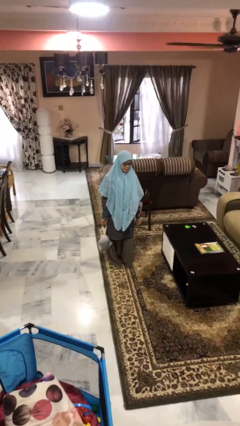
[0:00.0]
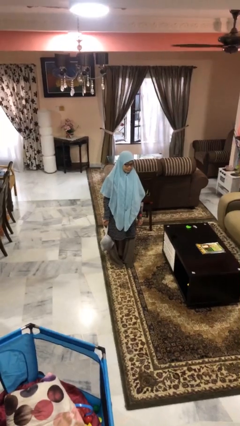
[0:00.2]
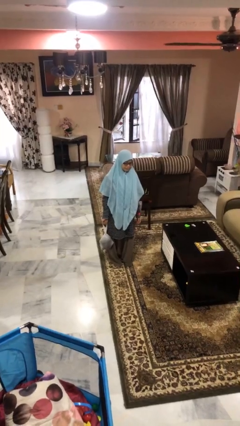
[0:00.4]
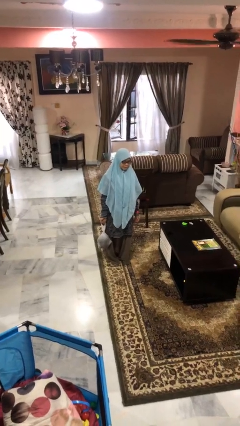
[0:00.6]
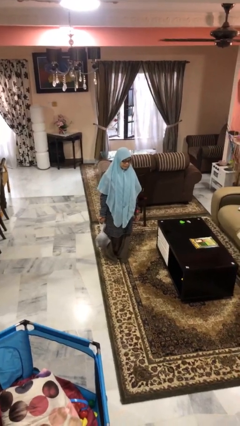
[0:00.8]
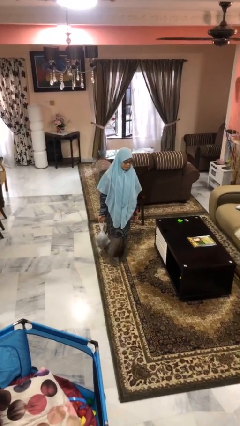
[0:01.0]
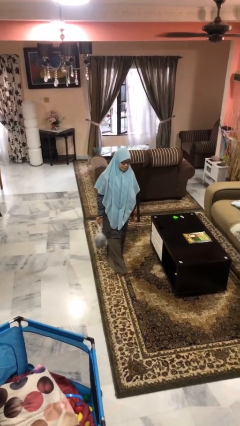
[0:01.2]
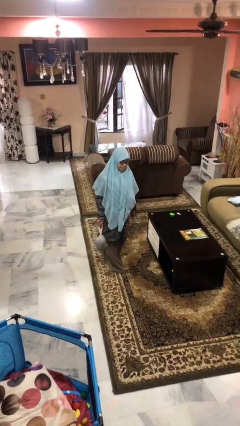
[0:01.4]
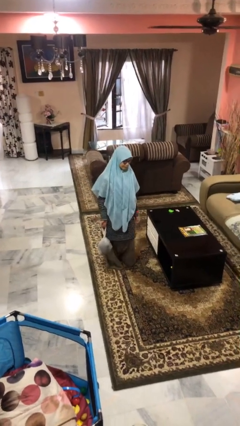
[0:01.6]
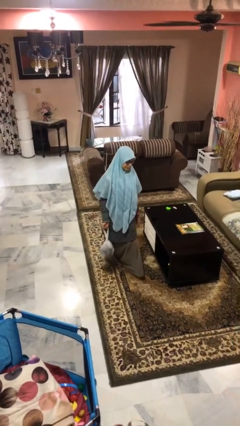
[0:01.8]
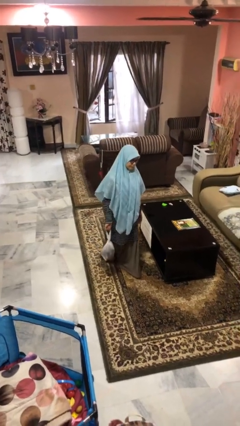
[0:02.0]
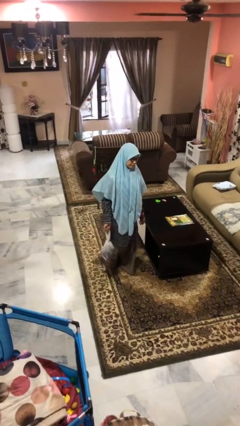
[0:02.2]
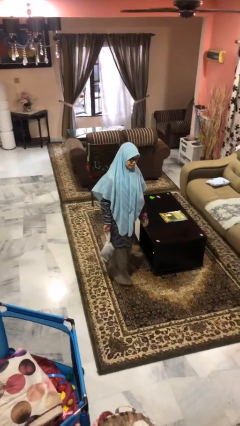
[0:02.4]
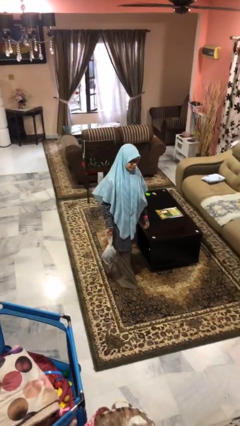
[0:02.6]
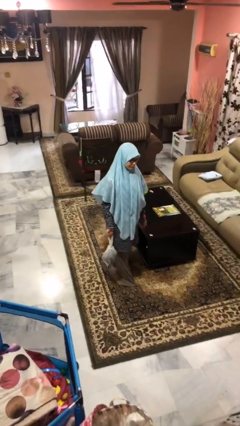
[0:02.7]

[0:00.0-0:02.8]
person carries groceries

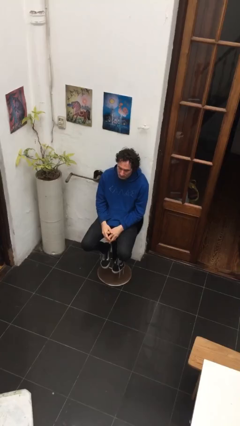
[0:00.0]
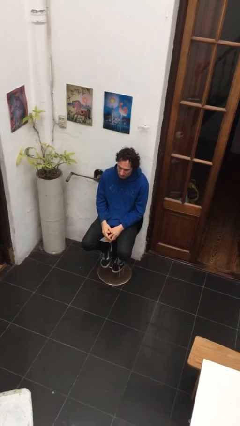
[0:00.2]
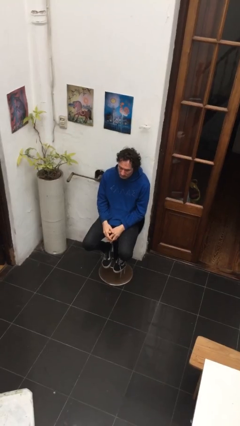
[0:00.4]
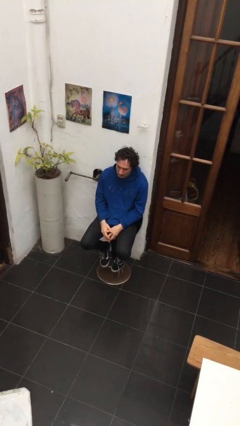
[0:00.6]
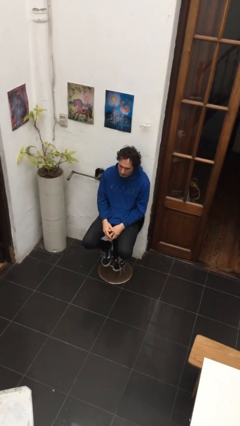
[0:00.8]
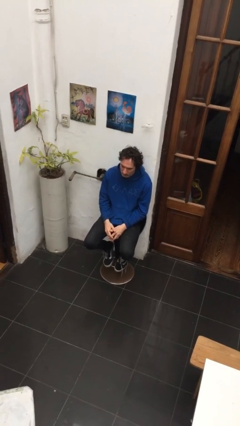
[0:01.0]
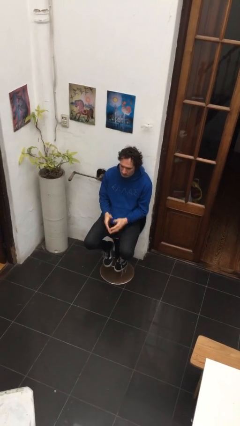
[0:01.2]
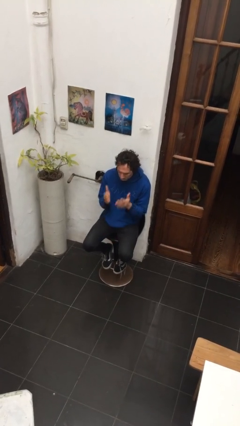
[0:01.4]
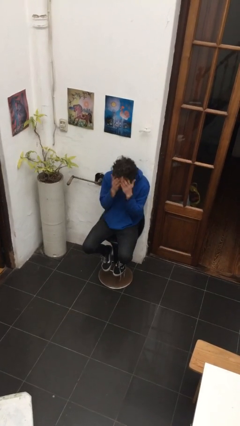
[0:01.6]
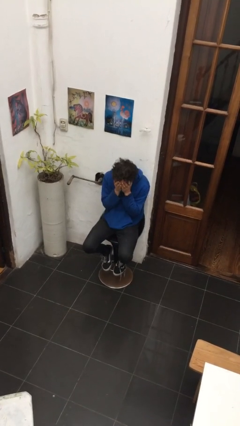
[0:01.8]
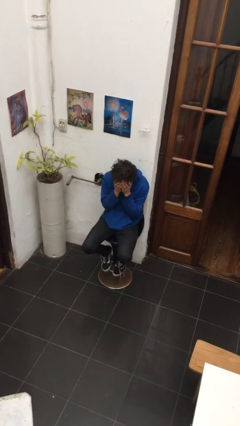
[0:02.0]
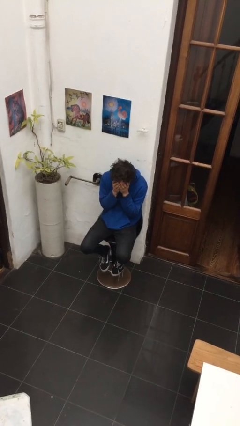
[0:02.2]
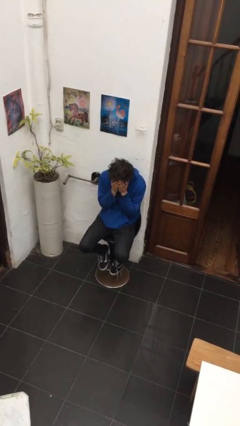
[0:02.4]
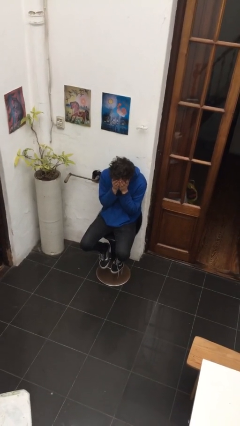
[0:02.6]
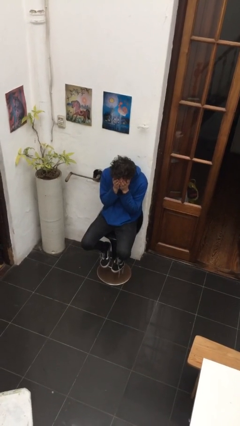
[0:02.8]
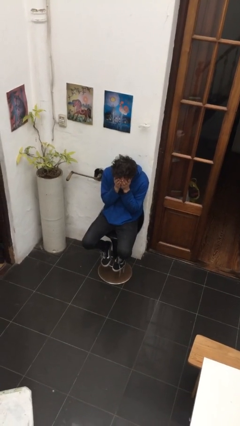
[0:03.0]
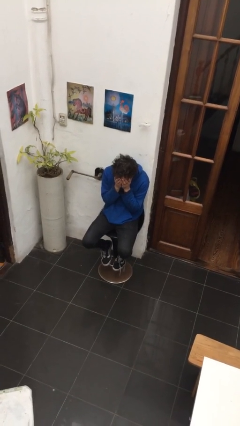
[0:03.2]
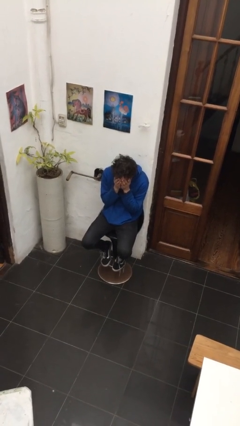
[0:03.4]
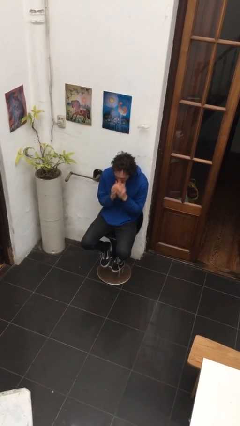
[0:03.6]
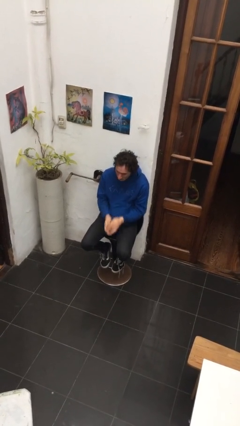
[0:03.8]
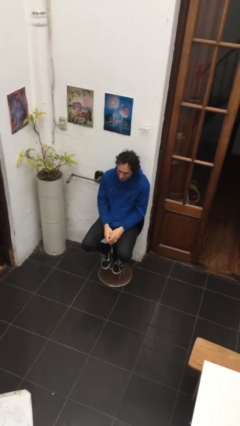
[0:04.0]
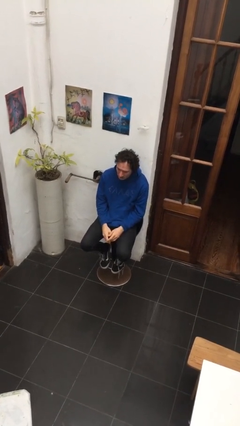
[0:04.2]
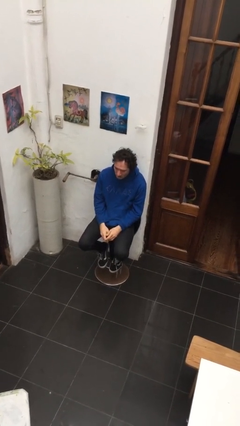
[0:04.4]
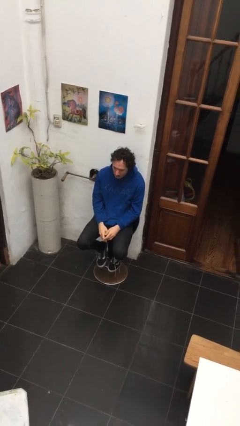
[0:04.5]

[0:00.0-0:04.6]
person covers face with hands

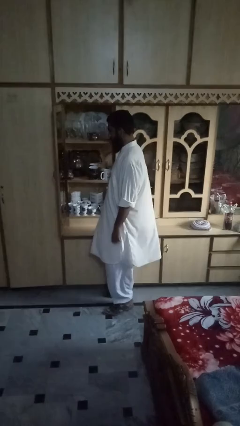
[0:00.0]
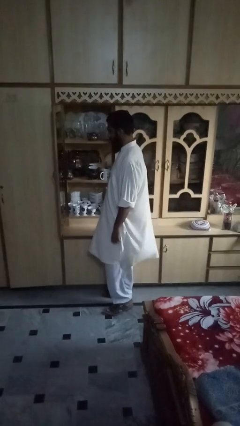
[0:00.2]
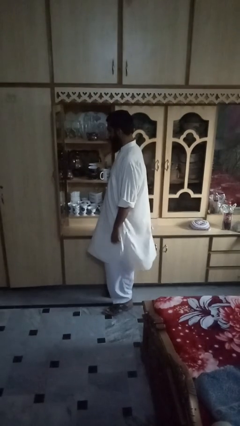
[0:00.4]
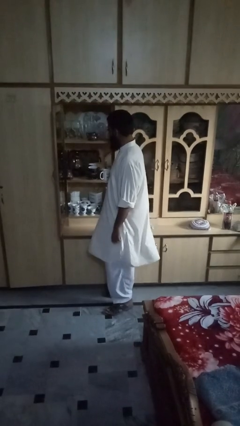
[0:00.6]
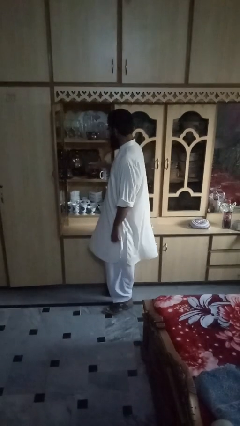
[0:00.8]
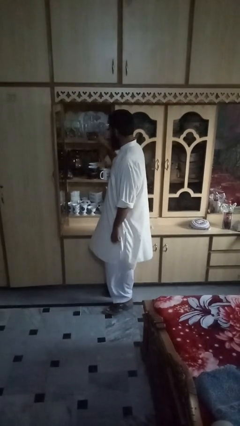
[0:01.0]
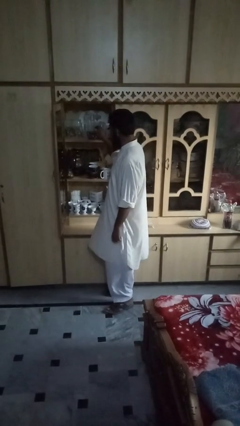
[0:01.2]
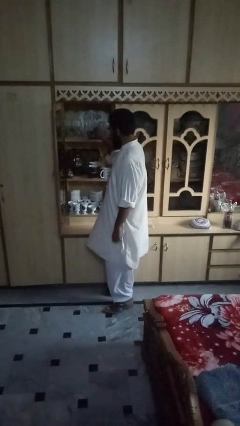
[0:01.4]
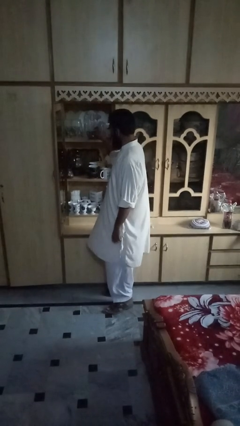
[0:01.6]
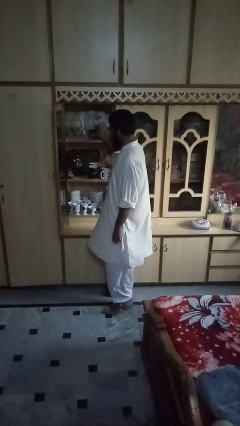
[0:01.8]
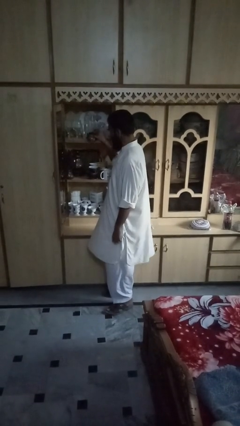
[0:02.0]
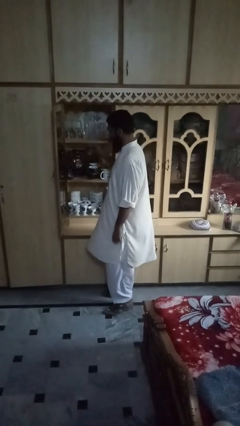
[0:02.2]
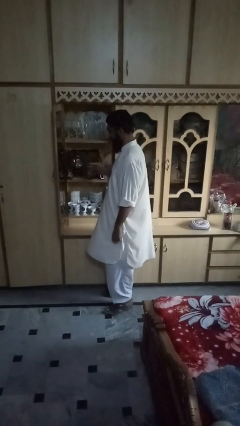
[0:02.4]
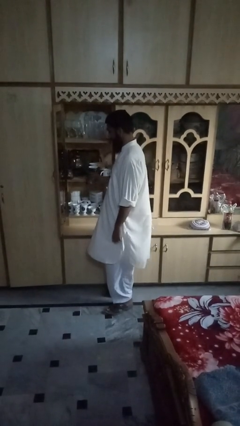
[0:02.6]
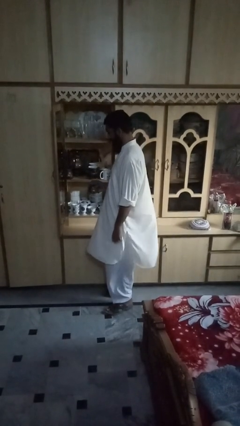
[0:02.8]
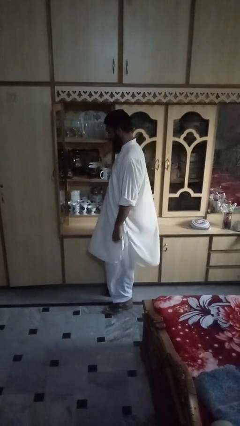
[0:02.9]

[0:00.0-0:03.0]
person picks up object from shelf

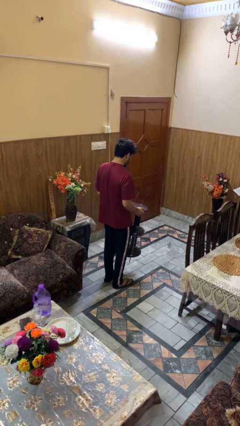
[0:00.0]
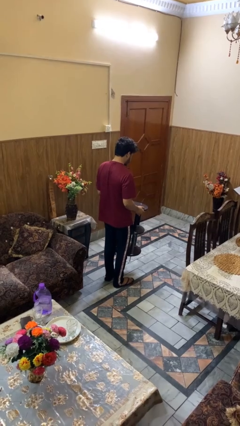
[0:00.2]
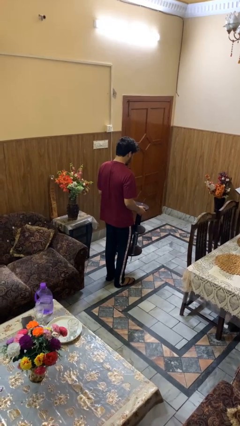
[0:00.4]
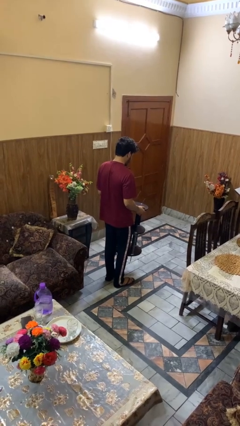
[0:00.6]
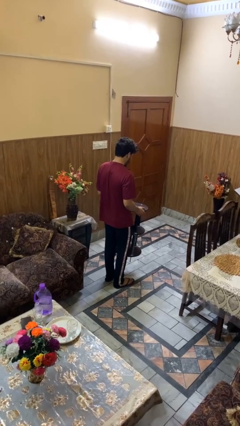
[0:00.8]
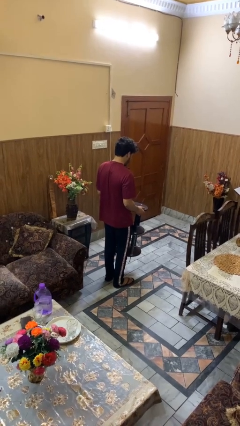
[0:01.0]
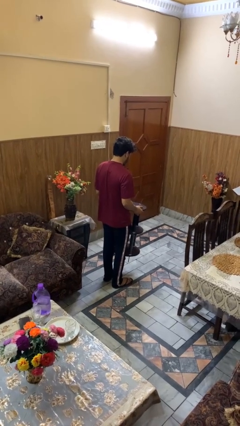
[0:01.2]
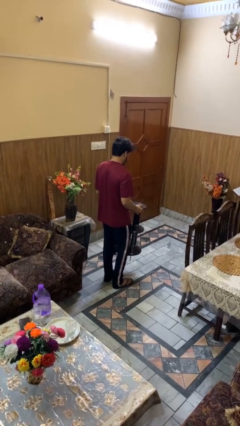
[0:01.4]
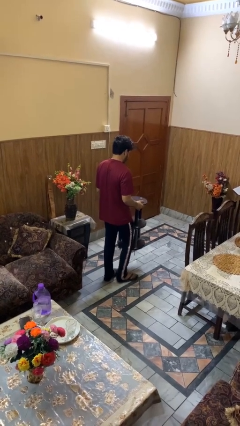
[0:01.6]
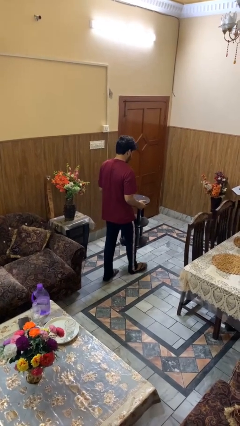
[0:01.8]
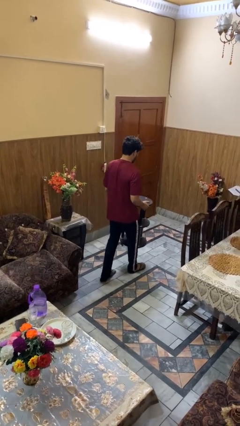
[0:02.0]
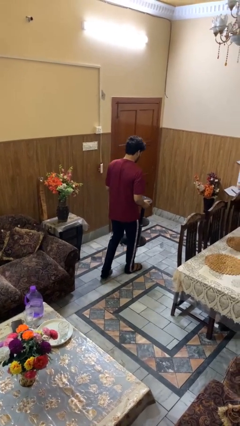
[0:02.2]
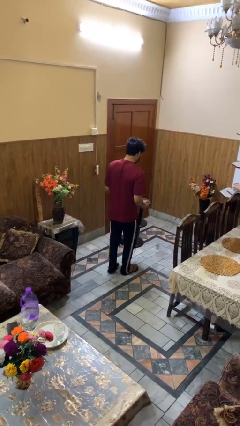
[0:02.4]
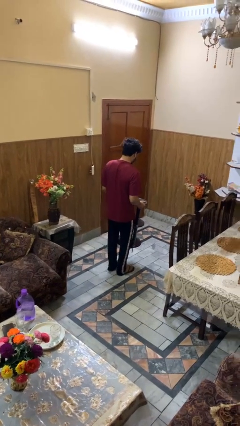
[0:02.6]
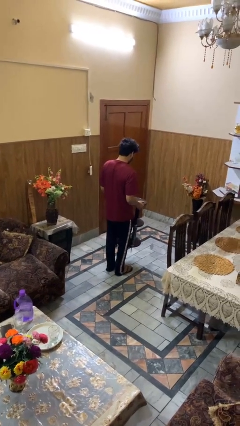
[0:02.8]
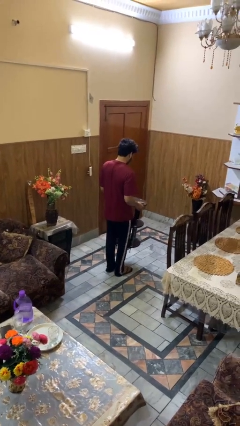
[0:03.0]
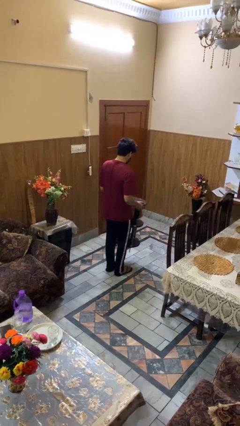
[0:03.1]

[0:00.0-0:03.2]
person carries furniture

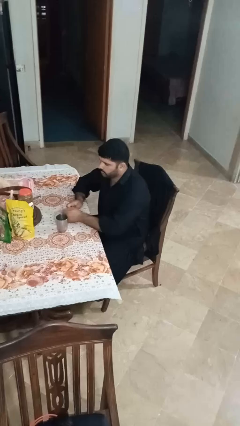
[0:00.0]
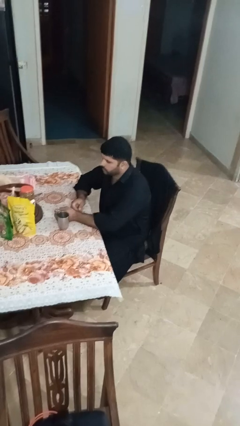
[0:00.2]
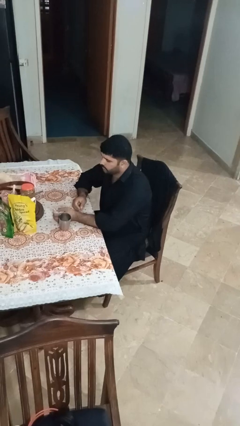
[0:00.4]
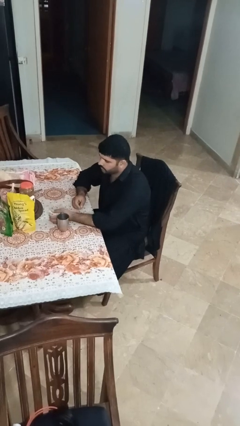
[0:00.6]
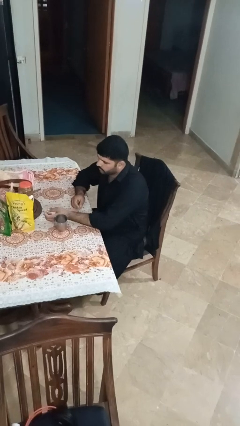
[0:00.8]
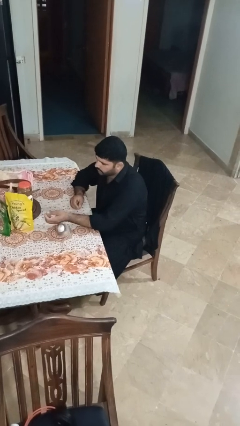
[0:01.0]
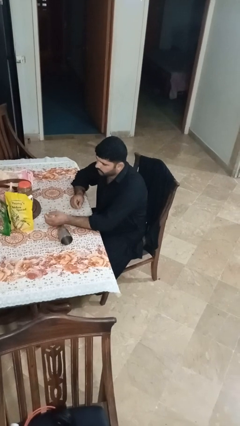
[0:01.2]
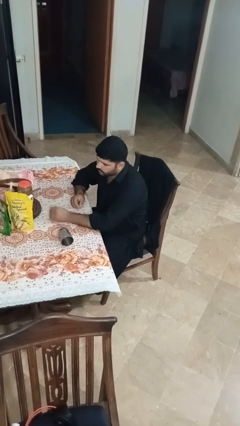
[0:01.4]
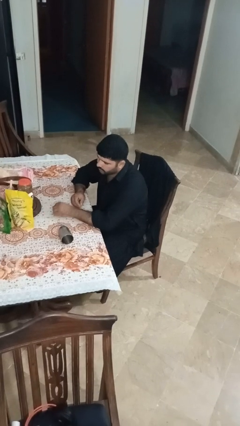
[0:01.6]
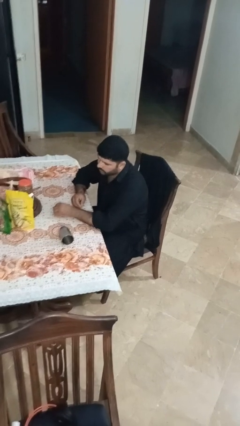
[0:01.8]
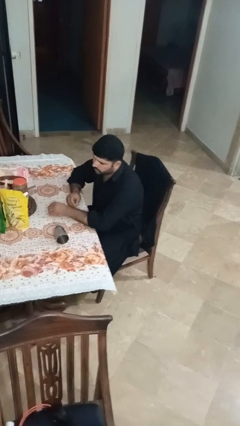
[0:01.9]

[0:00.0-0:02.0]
person knocks over glass

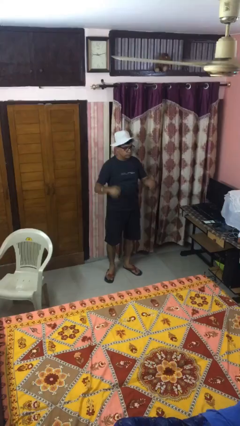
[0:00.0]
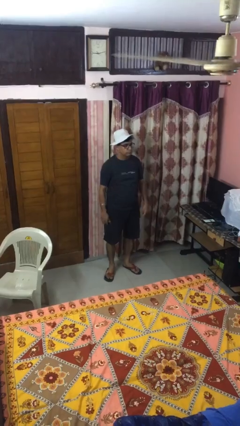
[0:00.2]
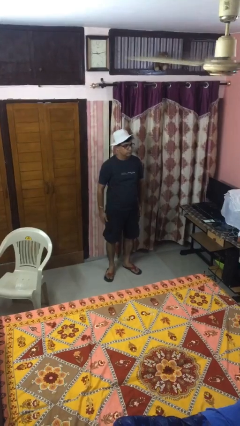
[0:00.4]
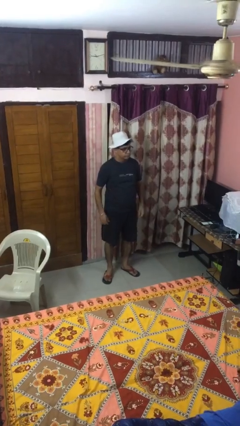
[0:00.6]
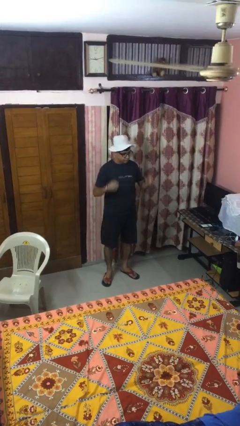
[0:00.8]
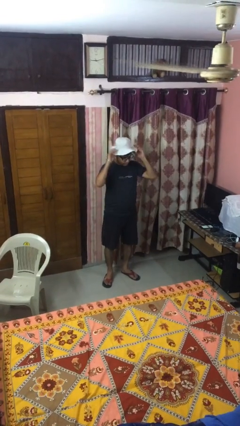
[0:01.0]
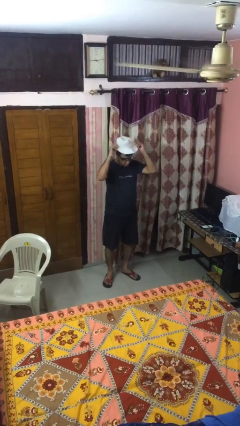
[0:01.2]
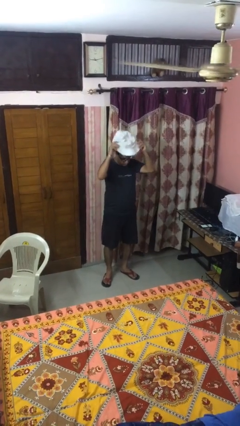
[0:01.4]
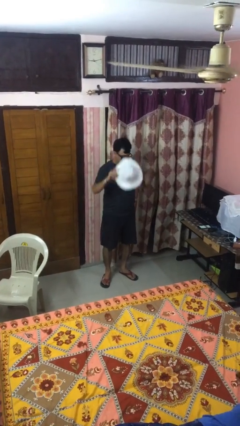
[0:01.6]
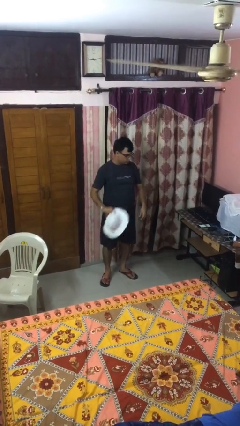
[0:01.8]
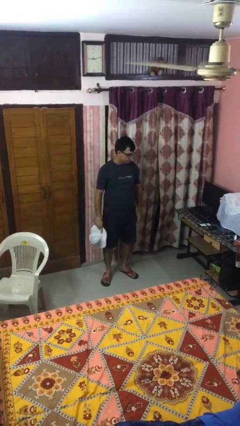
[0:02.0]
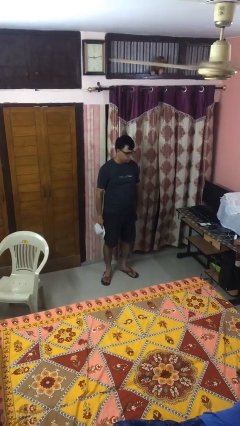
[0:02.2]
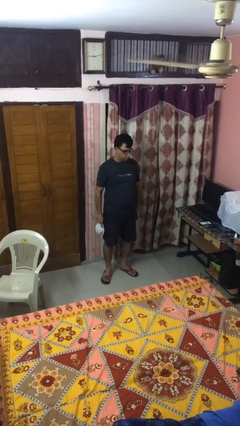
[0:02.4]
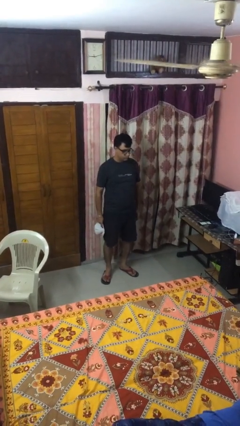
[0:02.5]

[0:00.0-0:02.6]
person takes off hat
